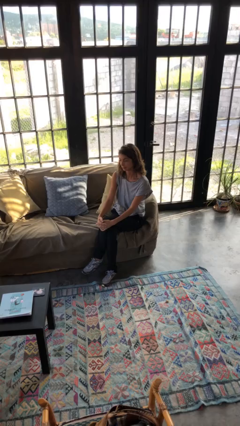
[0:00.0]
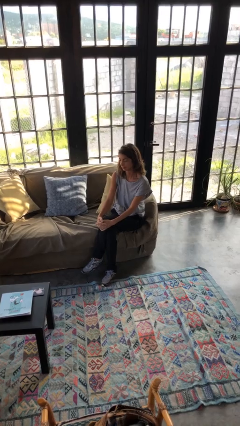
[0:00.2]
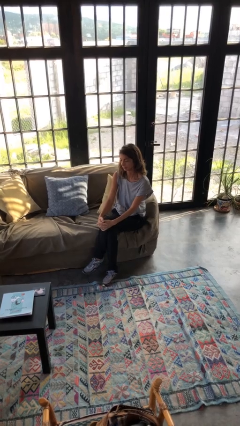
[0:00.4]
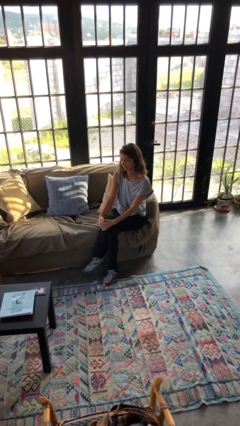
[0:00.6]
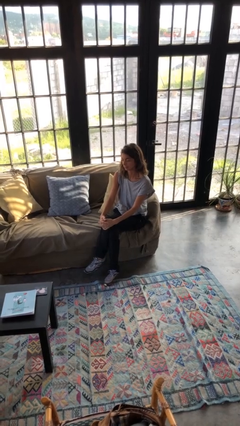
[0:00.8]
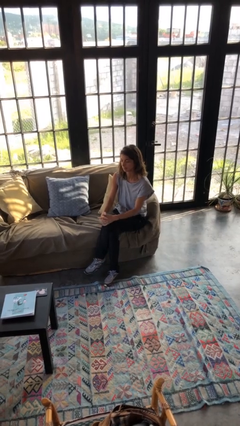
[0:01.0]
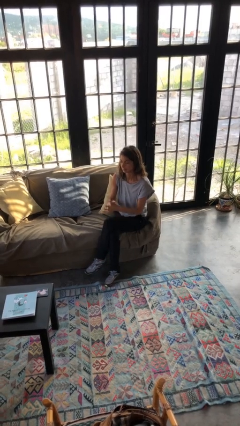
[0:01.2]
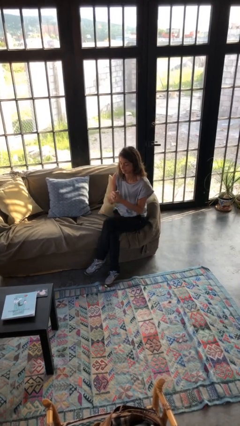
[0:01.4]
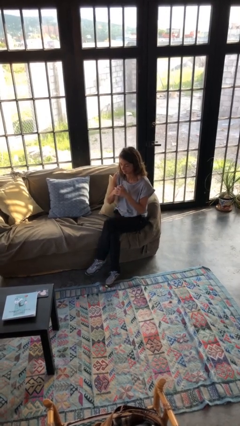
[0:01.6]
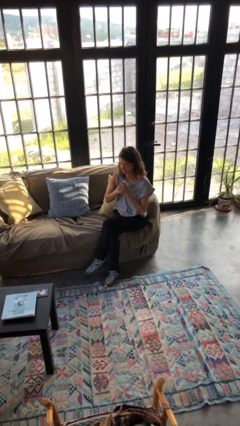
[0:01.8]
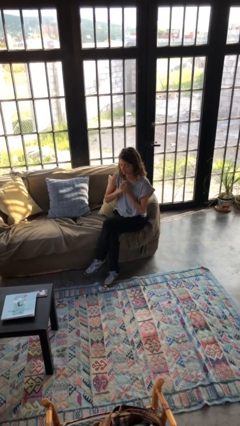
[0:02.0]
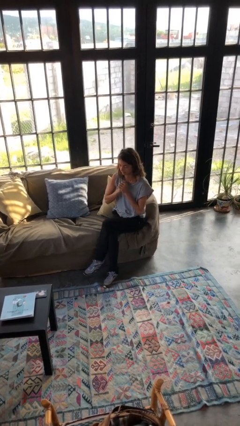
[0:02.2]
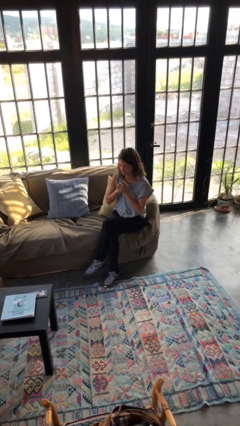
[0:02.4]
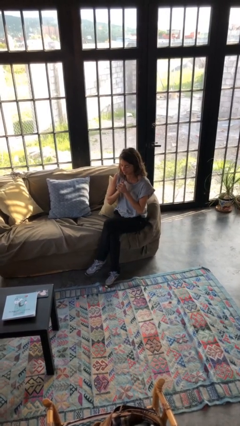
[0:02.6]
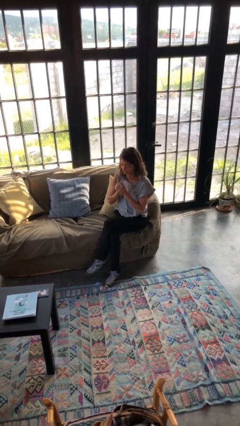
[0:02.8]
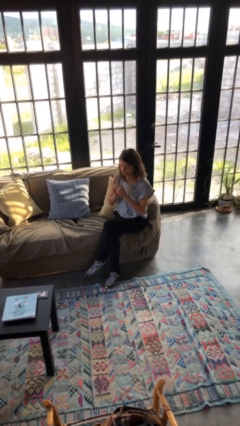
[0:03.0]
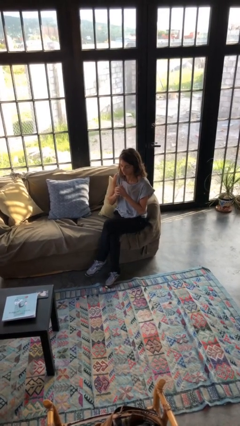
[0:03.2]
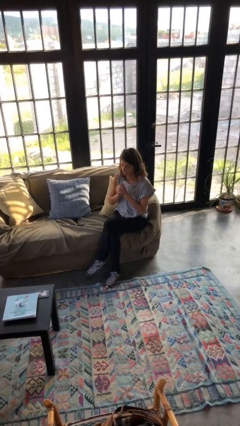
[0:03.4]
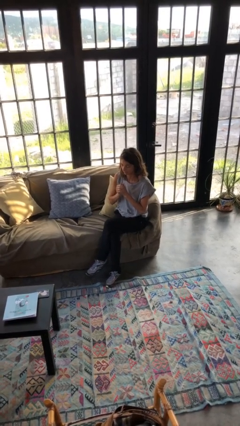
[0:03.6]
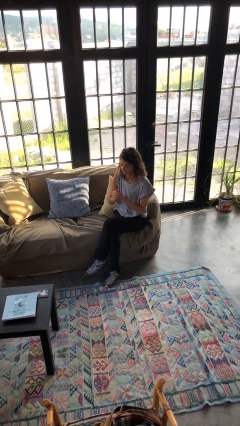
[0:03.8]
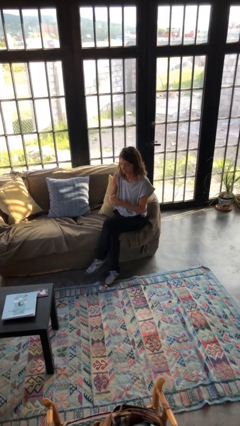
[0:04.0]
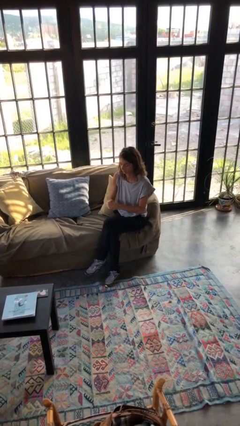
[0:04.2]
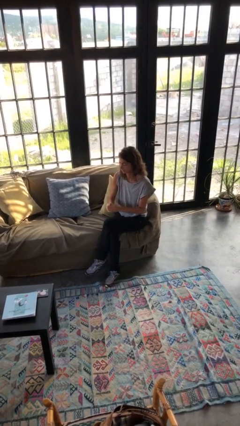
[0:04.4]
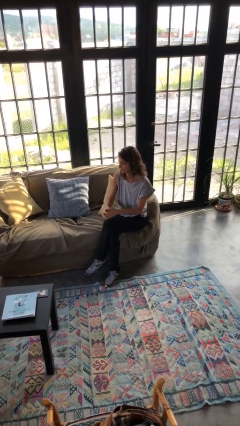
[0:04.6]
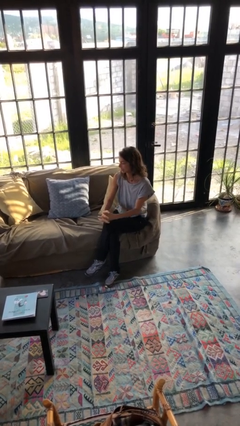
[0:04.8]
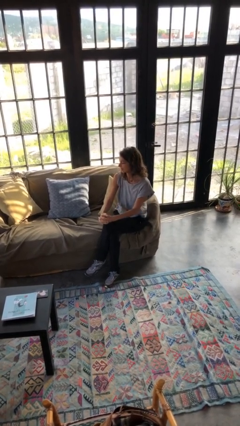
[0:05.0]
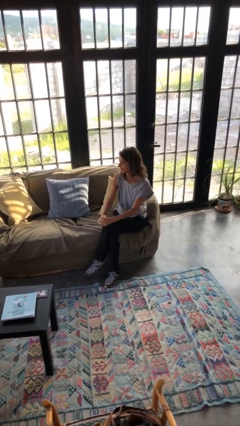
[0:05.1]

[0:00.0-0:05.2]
person cracks knuckles

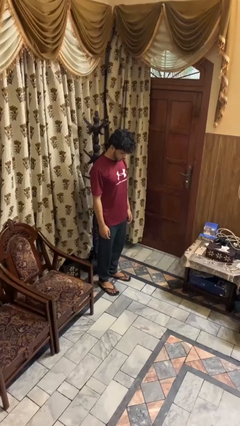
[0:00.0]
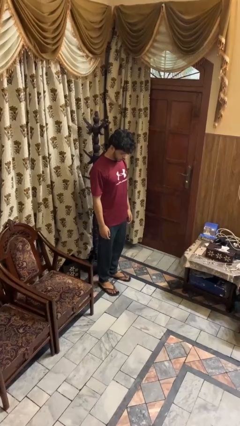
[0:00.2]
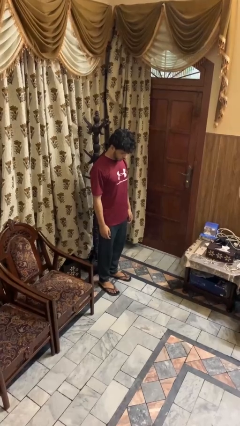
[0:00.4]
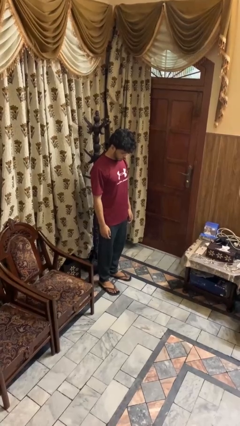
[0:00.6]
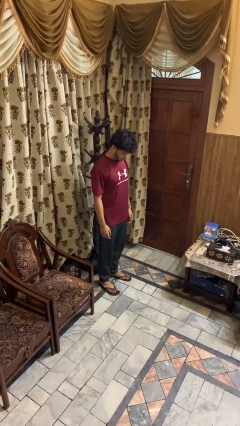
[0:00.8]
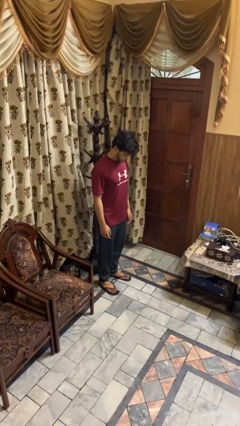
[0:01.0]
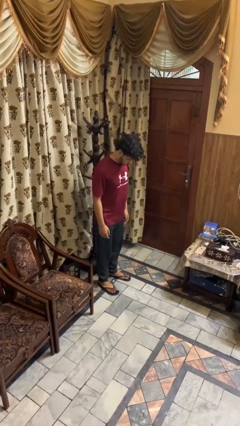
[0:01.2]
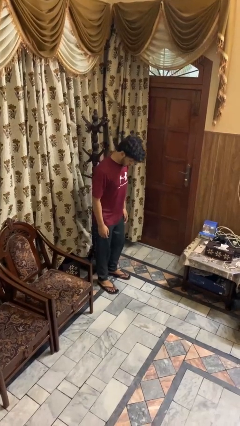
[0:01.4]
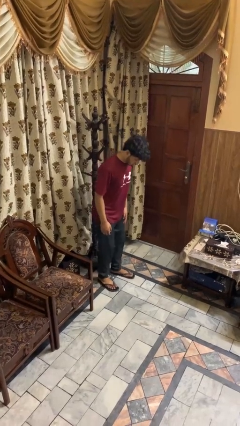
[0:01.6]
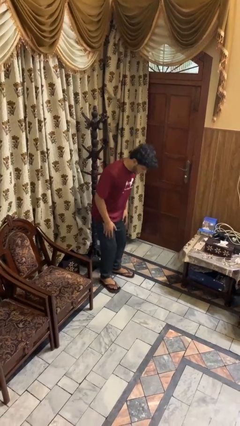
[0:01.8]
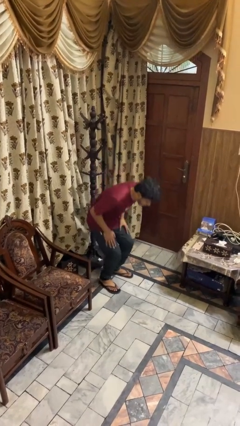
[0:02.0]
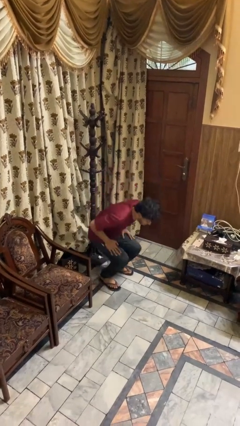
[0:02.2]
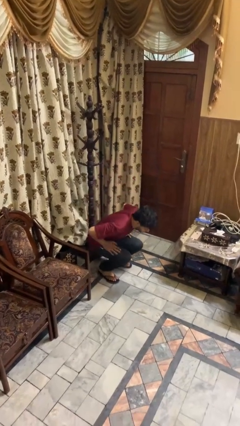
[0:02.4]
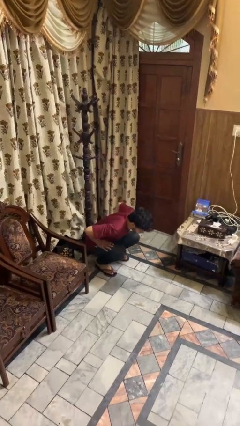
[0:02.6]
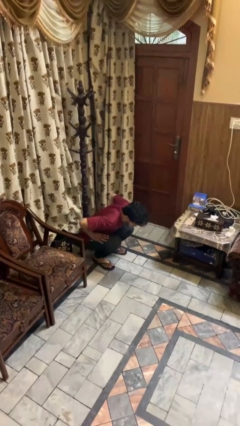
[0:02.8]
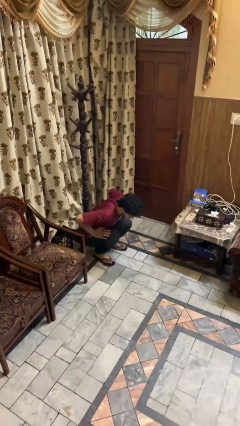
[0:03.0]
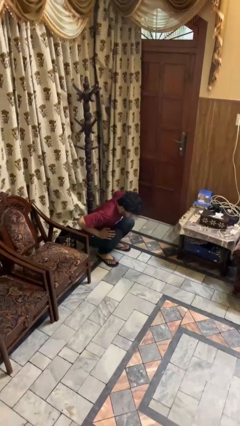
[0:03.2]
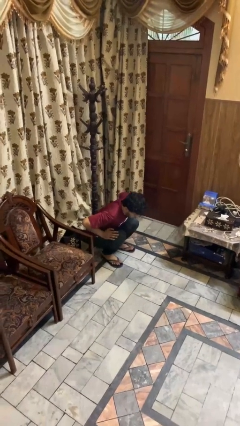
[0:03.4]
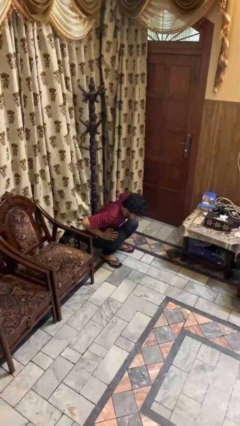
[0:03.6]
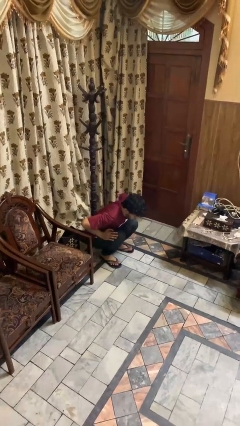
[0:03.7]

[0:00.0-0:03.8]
person squats

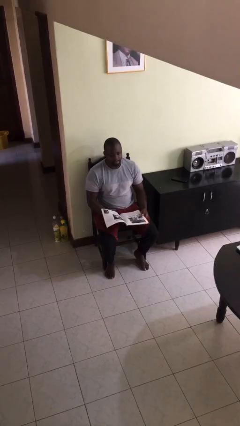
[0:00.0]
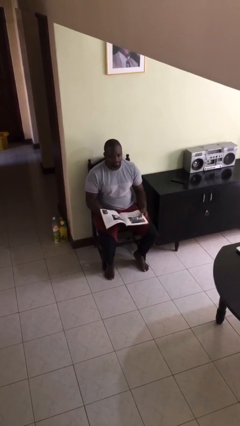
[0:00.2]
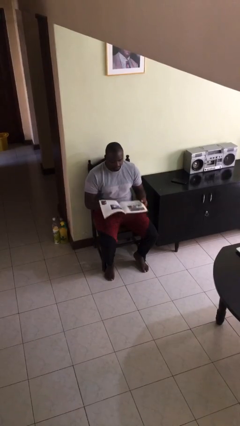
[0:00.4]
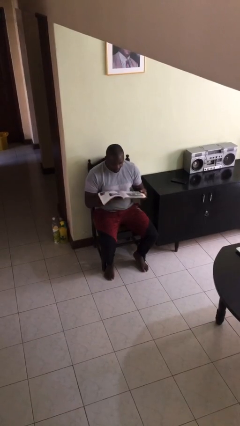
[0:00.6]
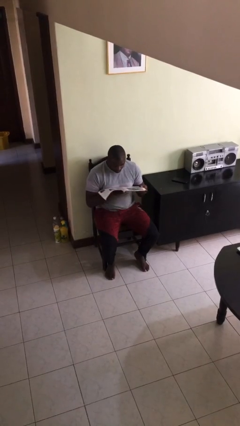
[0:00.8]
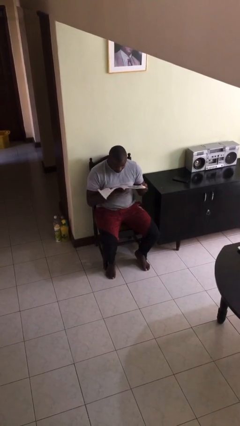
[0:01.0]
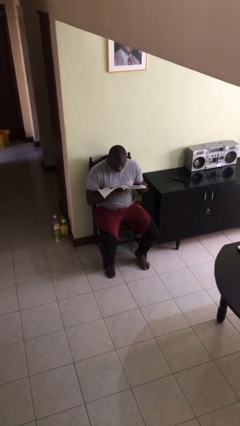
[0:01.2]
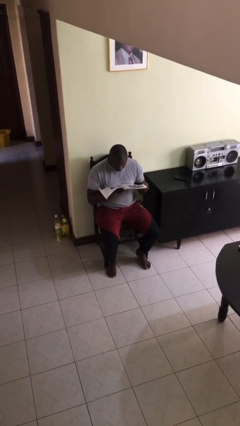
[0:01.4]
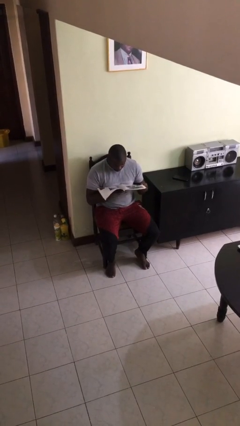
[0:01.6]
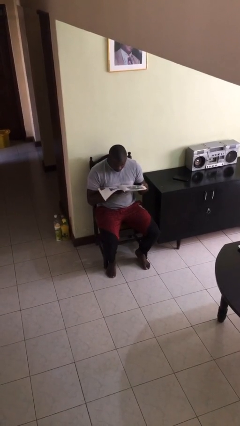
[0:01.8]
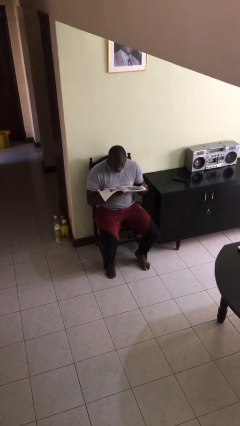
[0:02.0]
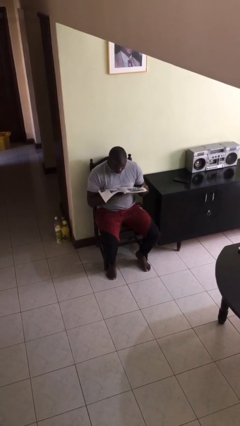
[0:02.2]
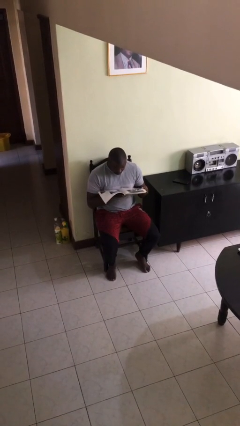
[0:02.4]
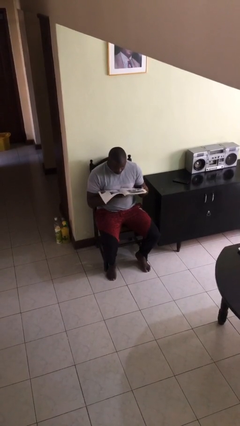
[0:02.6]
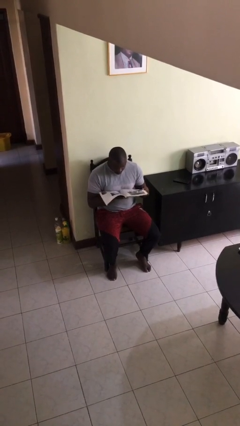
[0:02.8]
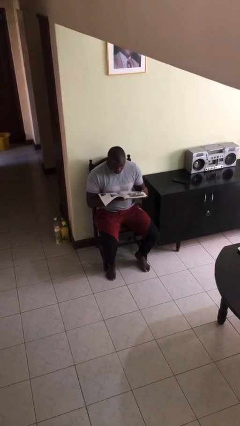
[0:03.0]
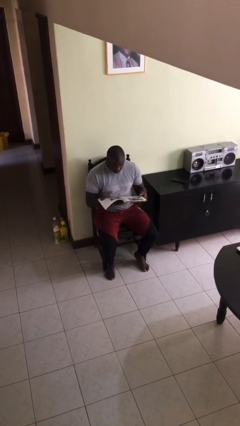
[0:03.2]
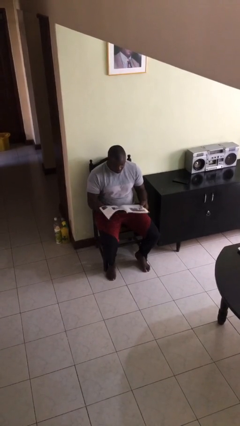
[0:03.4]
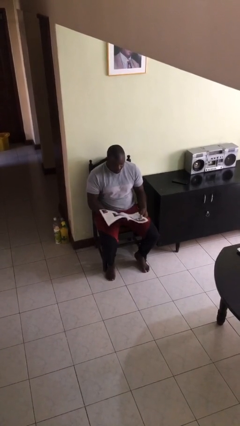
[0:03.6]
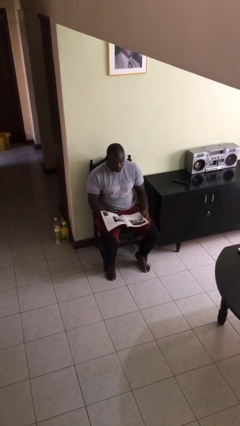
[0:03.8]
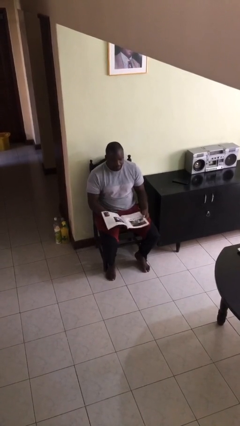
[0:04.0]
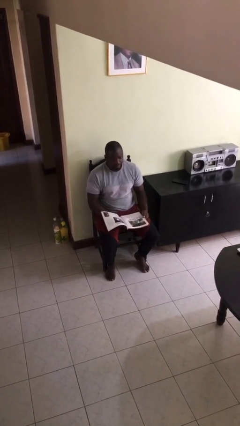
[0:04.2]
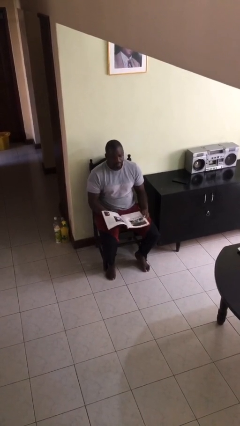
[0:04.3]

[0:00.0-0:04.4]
person reads document

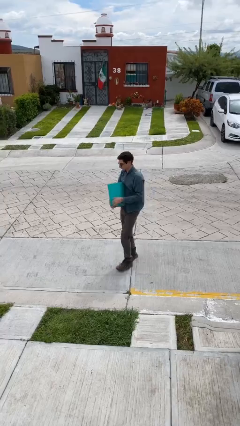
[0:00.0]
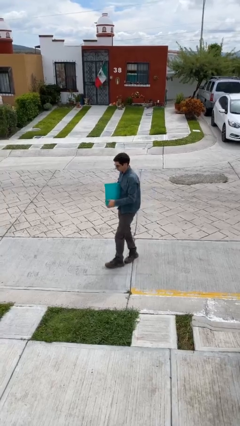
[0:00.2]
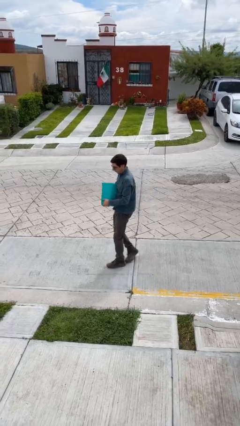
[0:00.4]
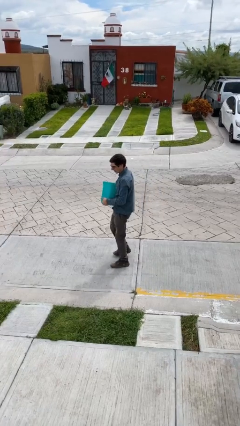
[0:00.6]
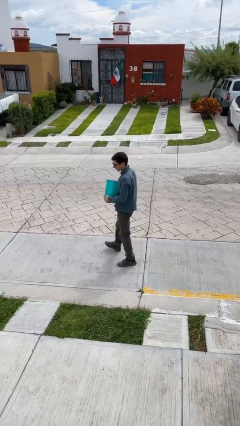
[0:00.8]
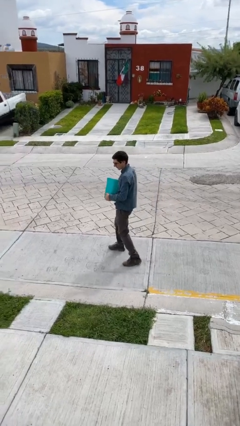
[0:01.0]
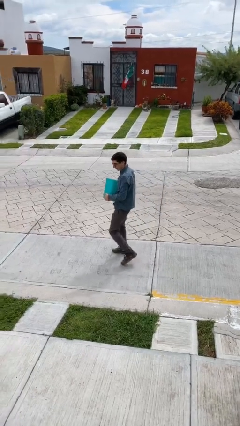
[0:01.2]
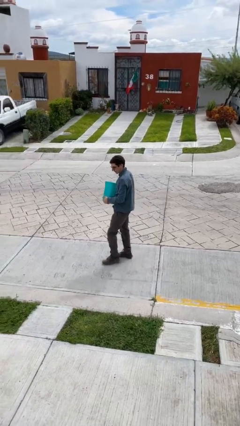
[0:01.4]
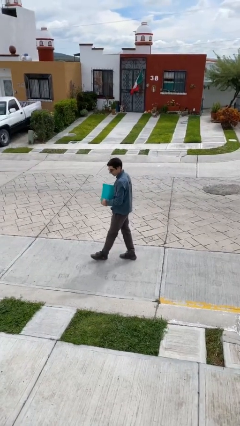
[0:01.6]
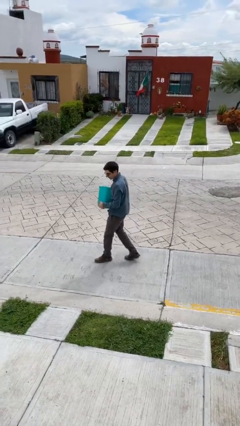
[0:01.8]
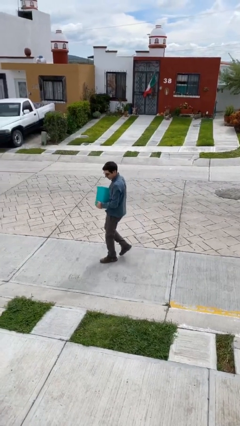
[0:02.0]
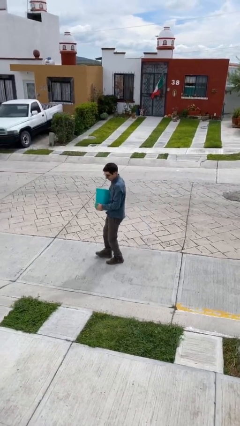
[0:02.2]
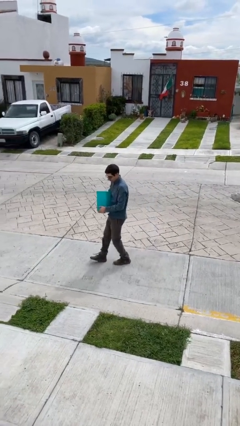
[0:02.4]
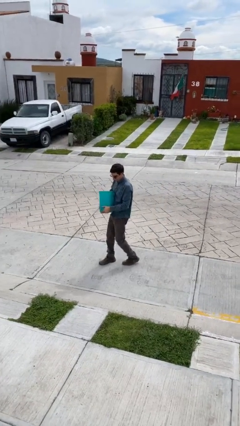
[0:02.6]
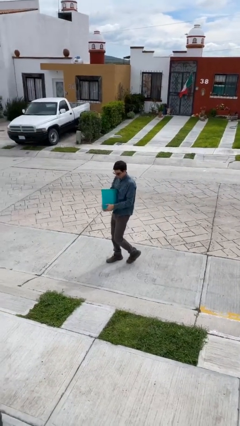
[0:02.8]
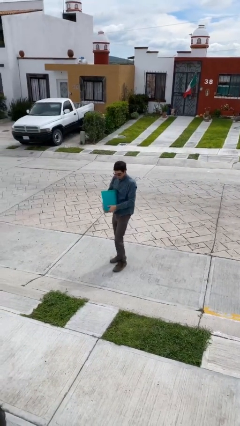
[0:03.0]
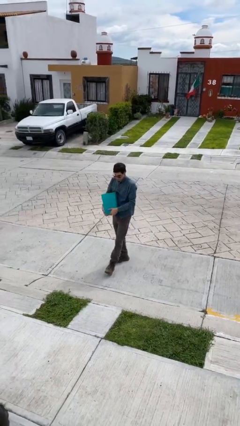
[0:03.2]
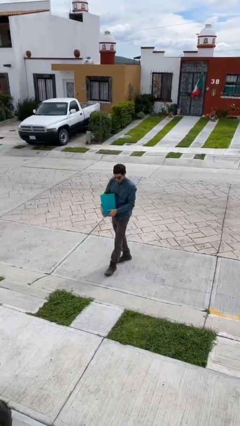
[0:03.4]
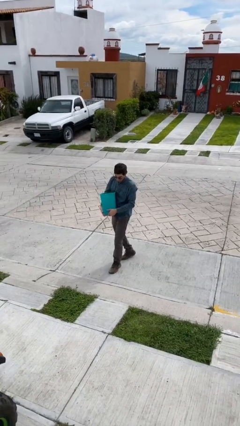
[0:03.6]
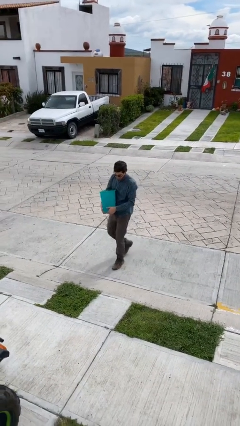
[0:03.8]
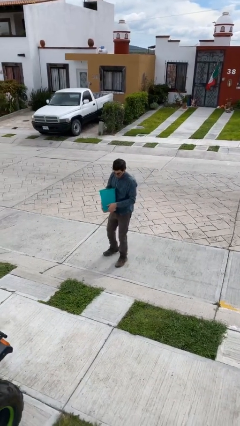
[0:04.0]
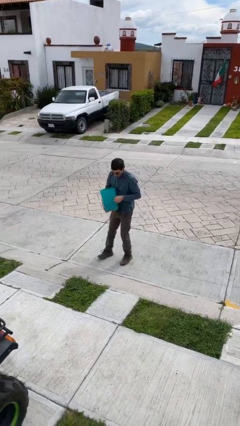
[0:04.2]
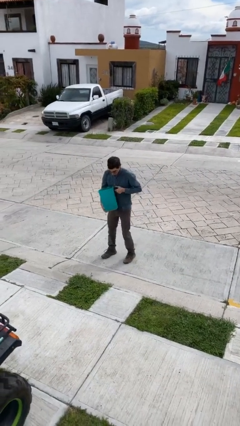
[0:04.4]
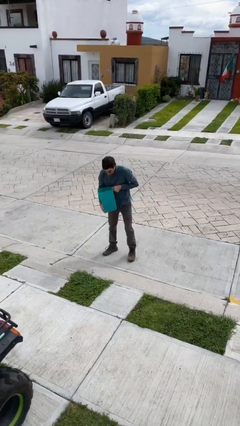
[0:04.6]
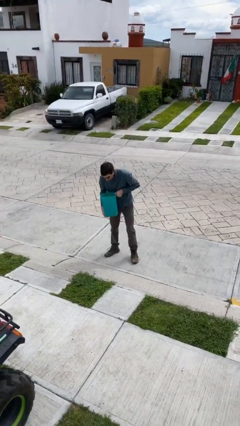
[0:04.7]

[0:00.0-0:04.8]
person carries heavy object
